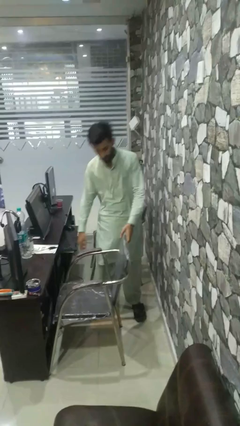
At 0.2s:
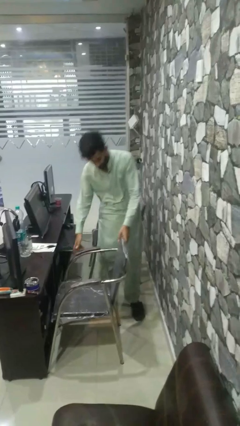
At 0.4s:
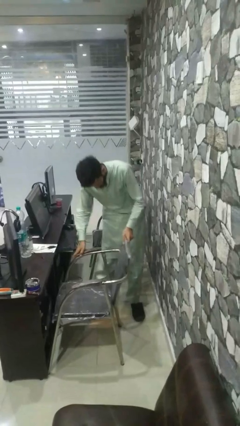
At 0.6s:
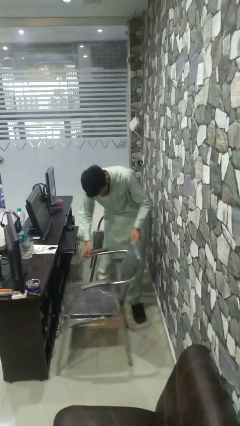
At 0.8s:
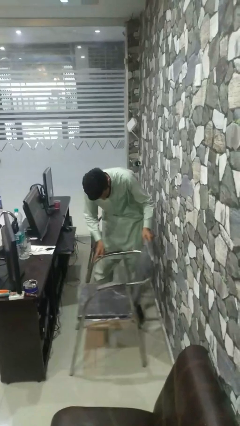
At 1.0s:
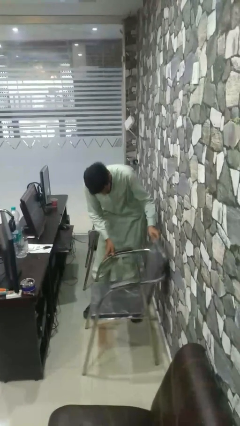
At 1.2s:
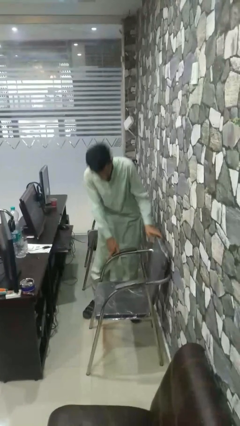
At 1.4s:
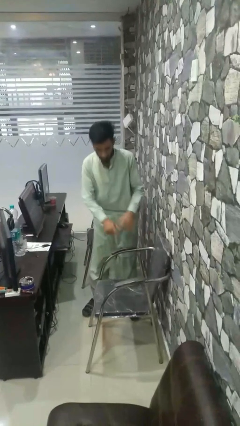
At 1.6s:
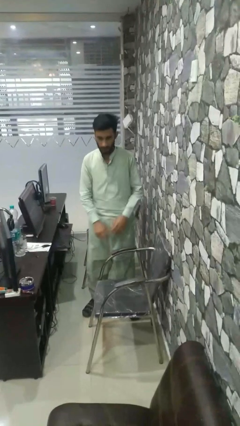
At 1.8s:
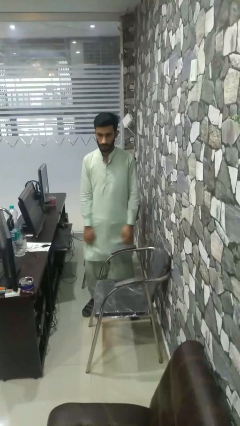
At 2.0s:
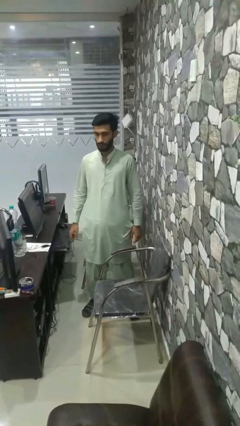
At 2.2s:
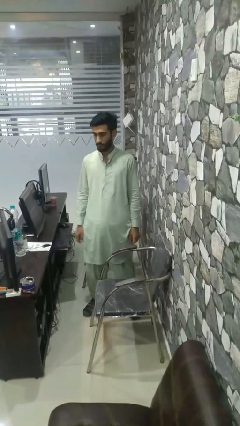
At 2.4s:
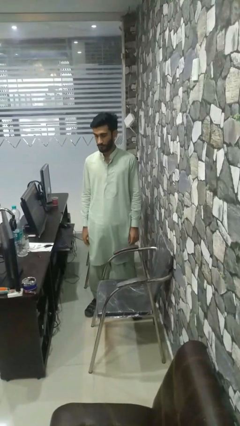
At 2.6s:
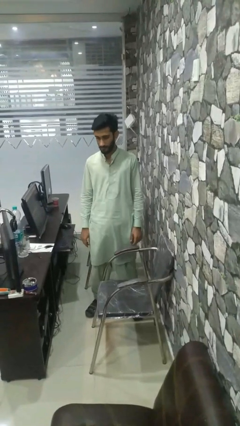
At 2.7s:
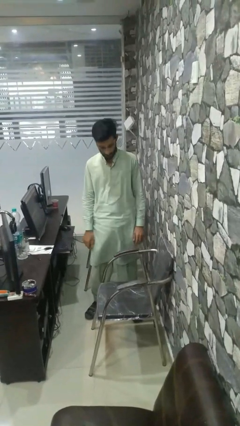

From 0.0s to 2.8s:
person pulls out chair

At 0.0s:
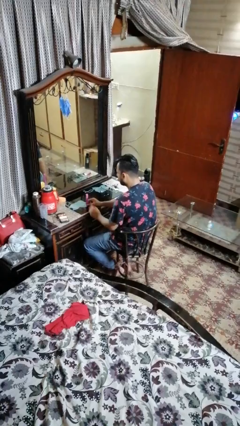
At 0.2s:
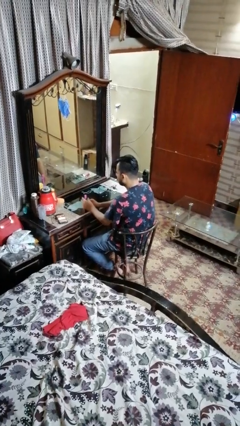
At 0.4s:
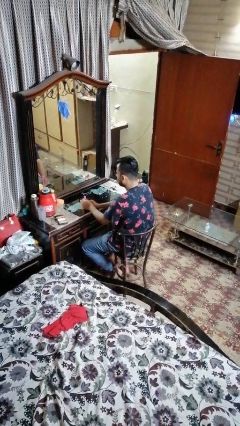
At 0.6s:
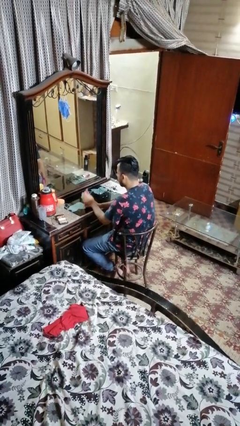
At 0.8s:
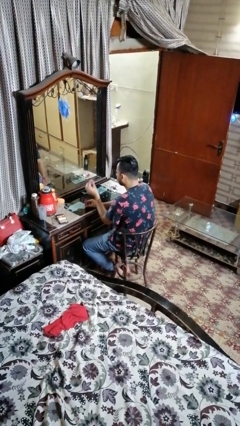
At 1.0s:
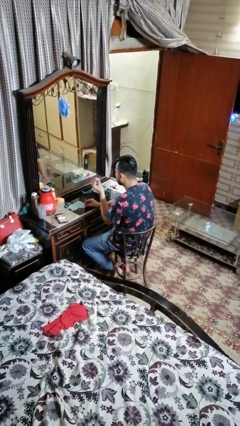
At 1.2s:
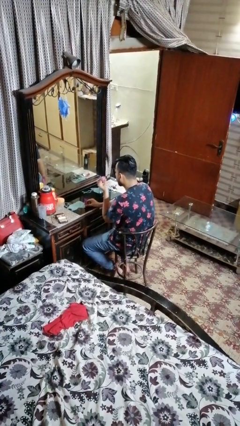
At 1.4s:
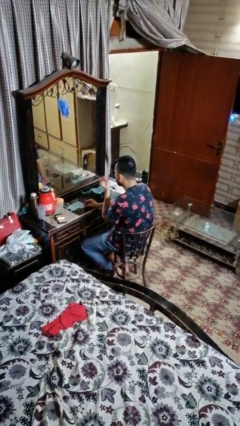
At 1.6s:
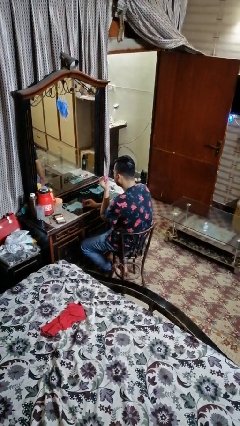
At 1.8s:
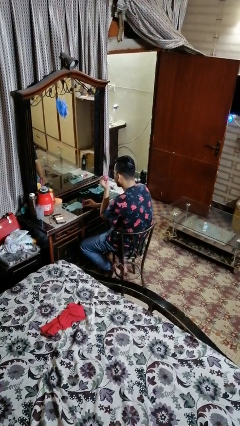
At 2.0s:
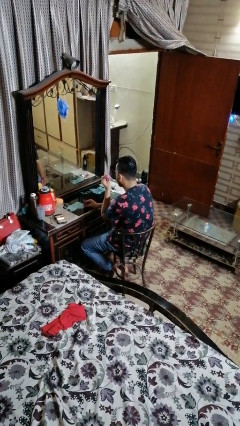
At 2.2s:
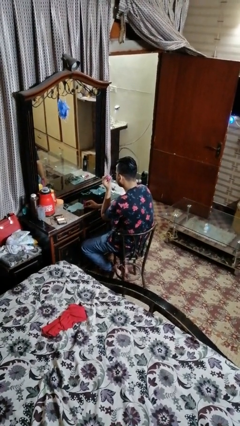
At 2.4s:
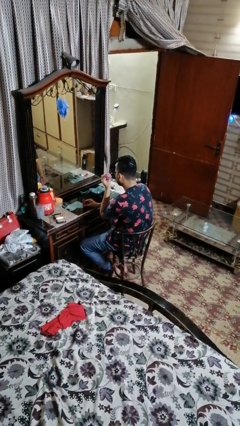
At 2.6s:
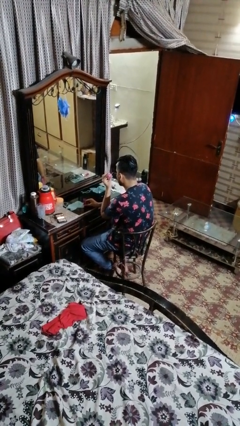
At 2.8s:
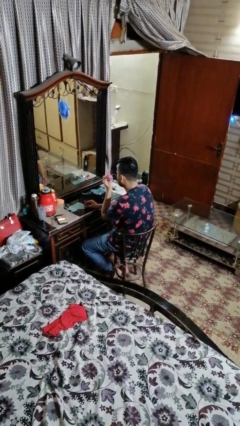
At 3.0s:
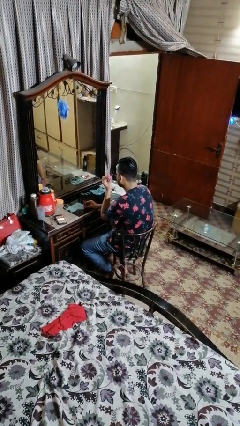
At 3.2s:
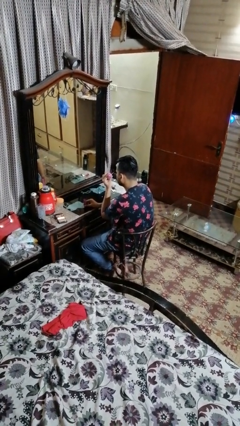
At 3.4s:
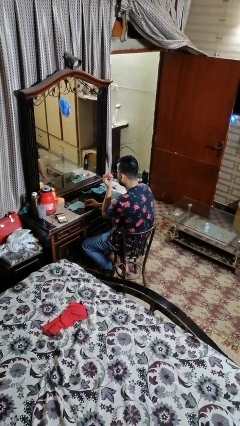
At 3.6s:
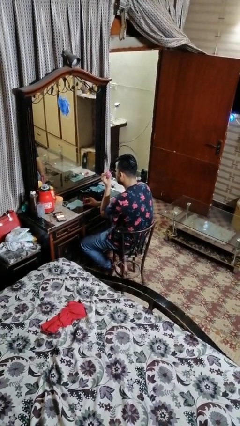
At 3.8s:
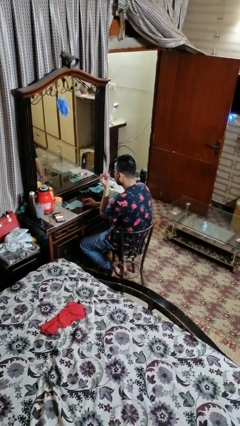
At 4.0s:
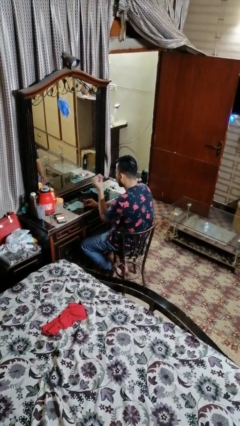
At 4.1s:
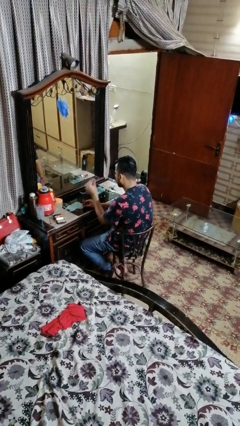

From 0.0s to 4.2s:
person applies eye makeup

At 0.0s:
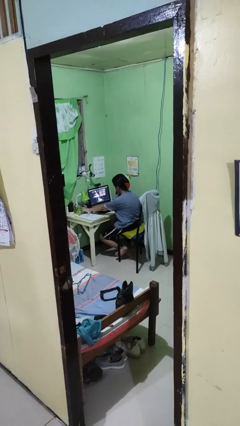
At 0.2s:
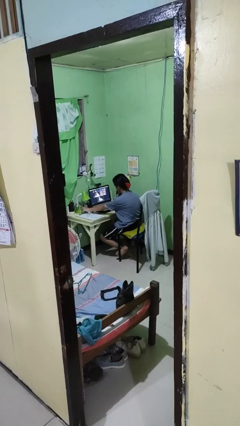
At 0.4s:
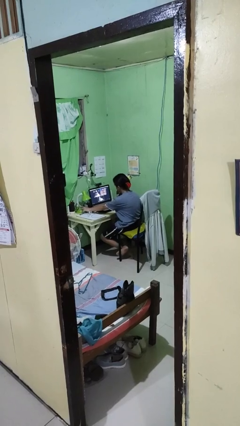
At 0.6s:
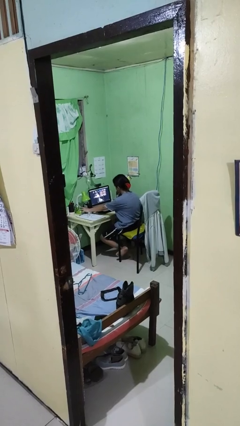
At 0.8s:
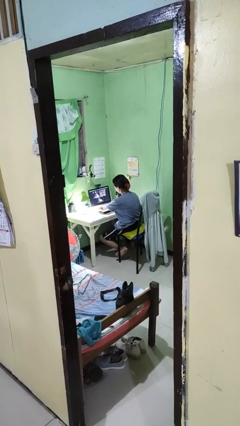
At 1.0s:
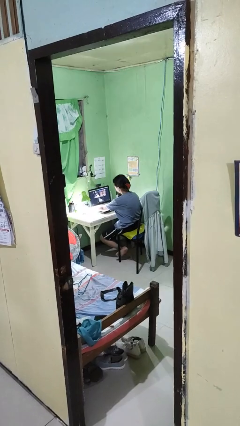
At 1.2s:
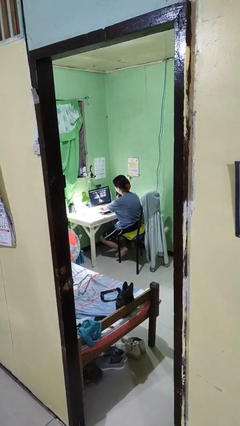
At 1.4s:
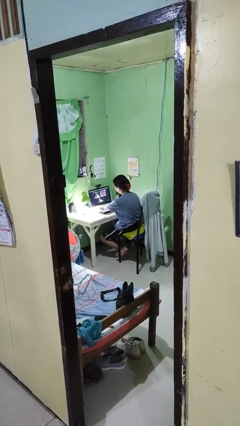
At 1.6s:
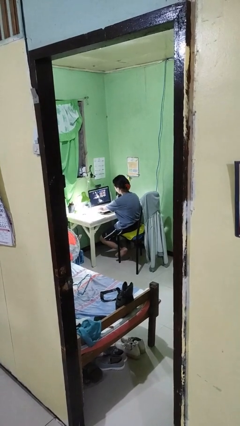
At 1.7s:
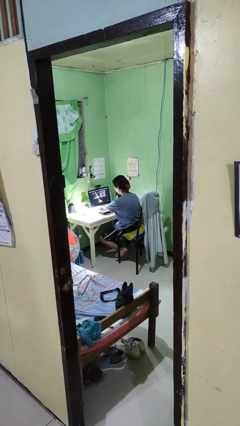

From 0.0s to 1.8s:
person turns on lamp

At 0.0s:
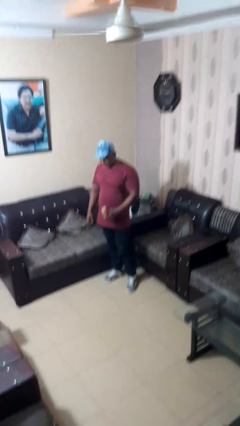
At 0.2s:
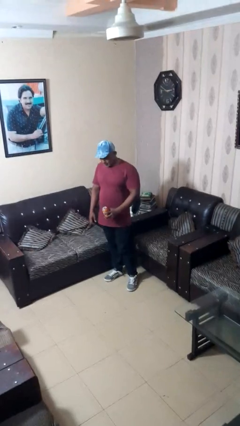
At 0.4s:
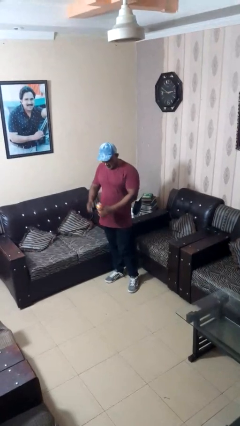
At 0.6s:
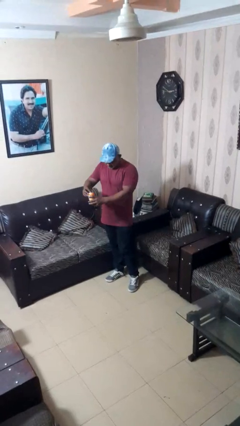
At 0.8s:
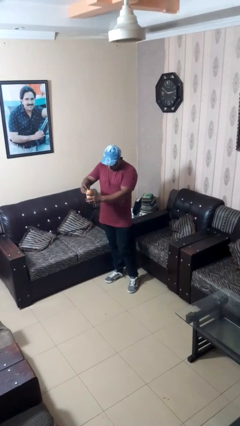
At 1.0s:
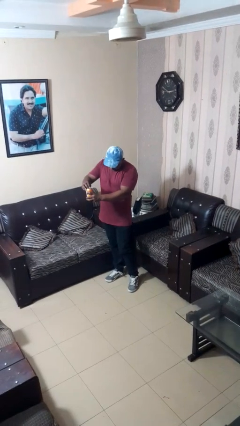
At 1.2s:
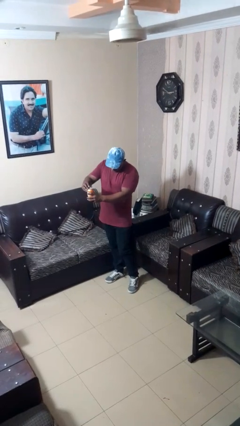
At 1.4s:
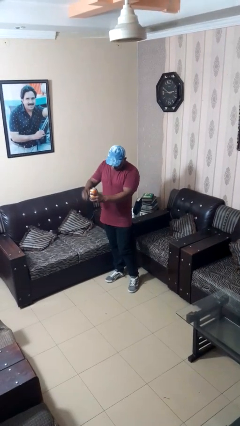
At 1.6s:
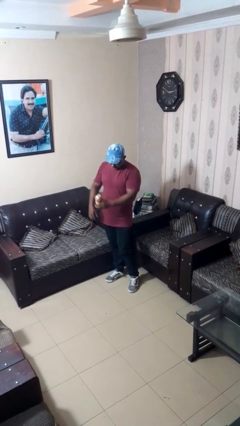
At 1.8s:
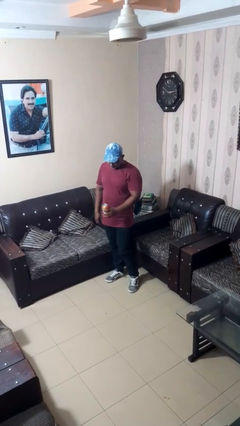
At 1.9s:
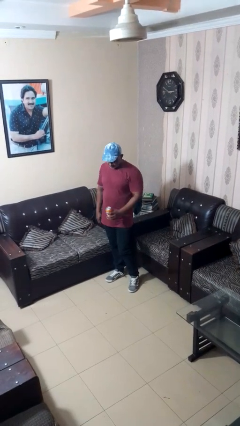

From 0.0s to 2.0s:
person opens beverage can

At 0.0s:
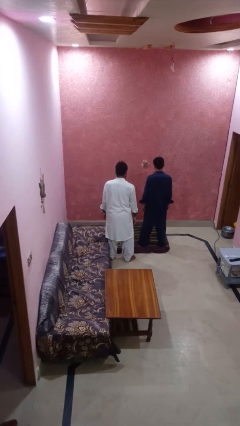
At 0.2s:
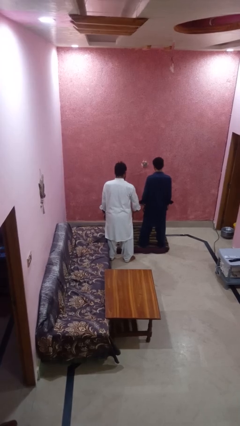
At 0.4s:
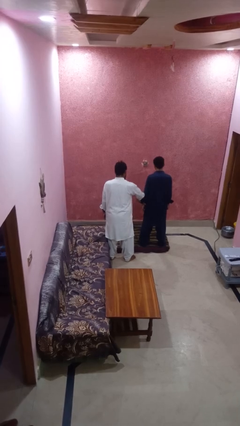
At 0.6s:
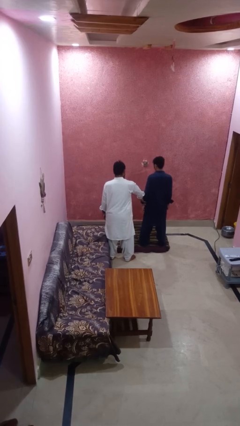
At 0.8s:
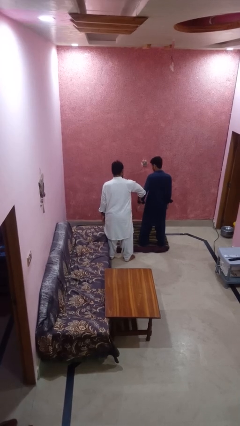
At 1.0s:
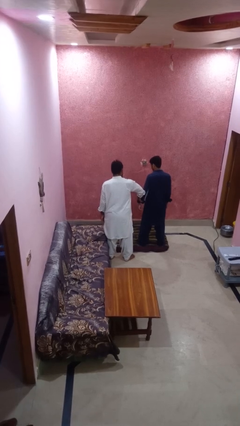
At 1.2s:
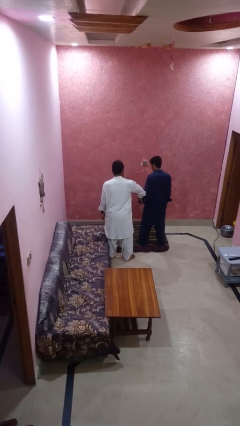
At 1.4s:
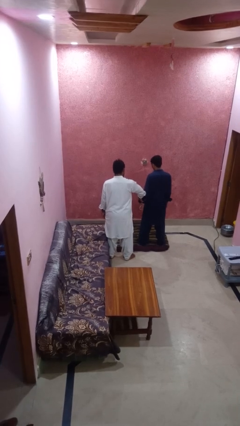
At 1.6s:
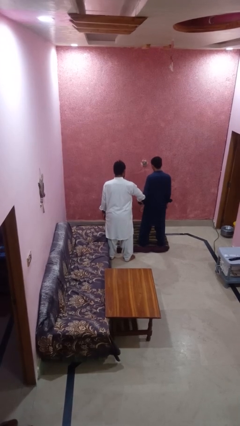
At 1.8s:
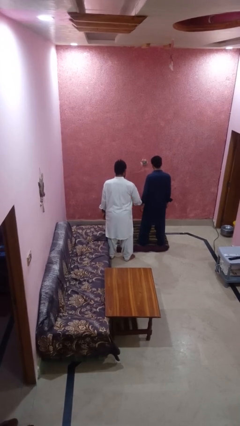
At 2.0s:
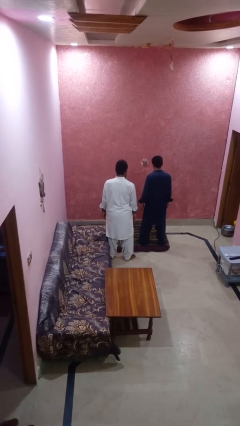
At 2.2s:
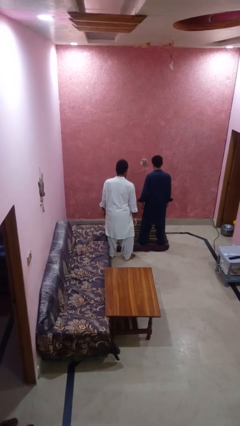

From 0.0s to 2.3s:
person grabs person by bicep

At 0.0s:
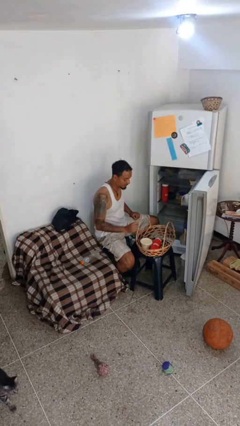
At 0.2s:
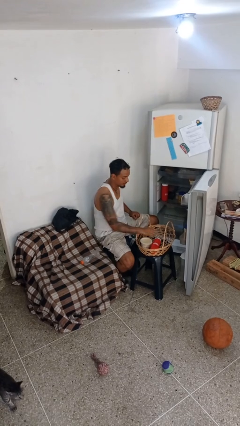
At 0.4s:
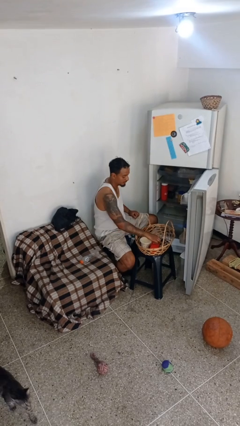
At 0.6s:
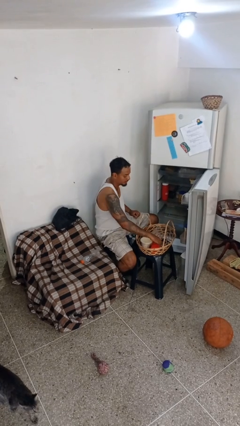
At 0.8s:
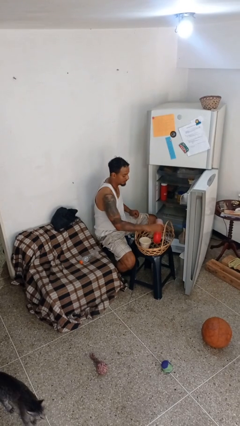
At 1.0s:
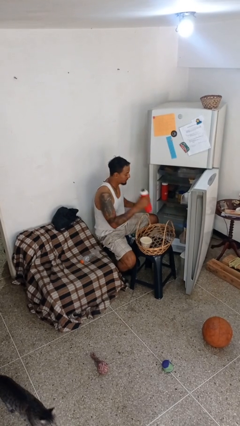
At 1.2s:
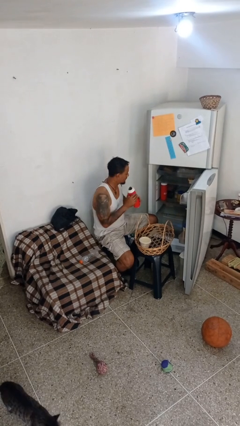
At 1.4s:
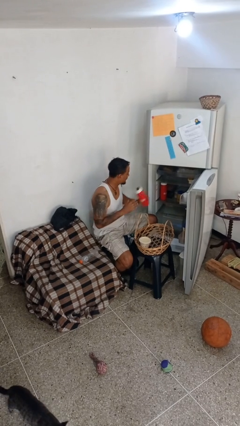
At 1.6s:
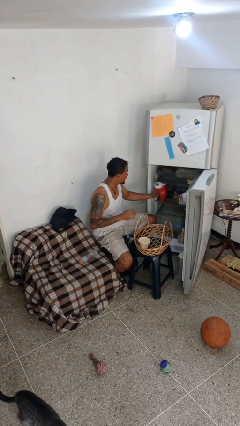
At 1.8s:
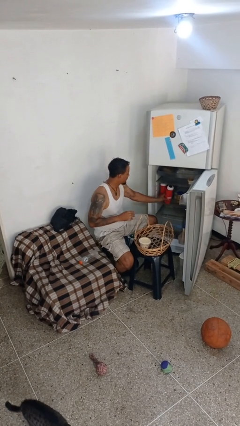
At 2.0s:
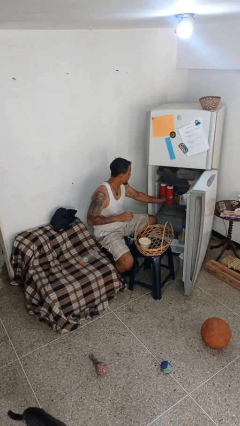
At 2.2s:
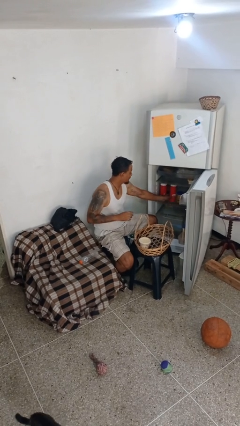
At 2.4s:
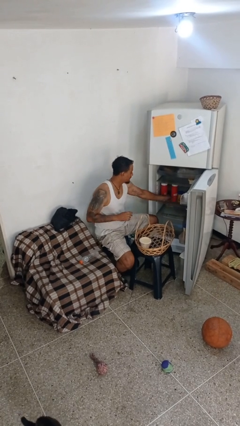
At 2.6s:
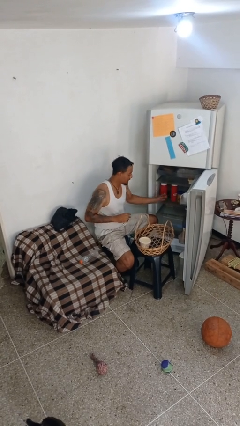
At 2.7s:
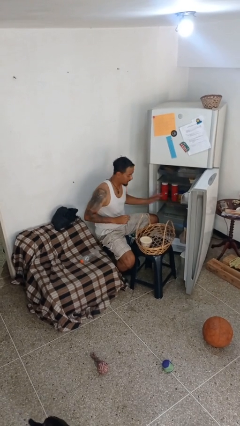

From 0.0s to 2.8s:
person loads groceries into refrigerator

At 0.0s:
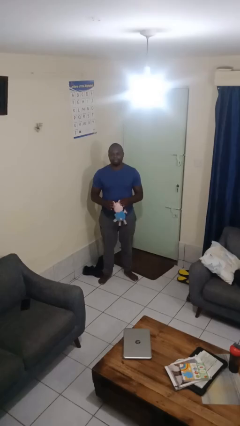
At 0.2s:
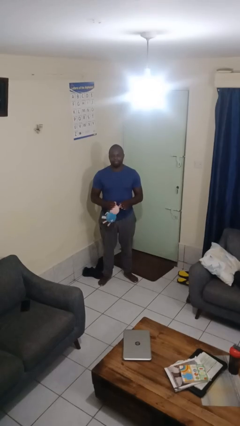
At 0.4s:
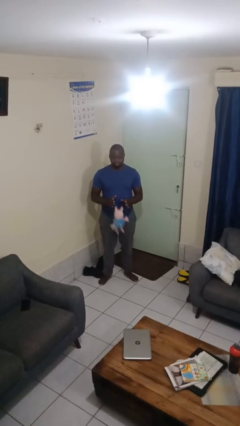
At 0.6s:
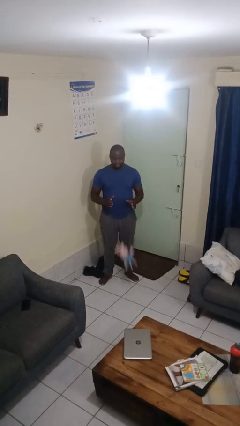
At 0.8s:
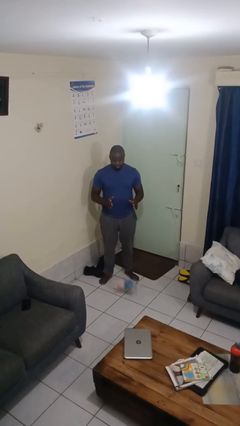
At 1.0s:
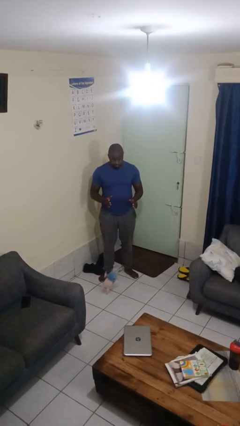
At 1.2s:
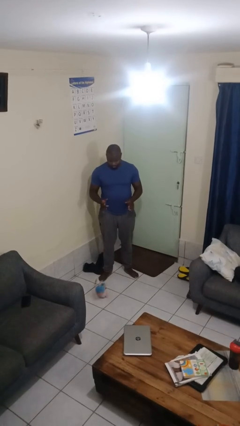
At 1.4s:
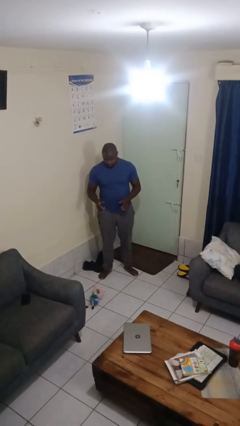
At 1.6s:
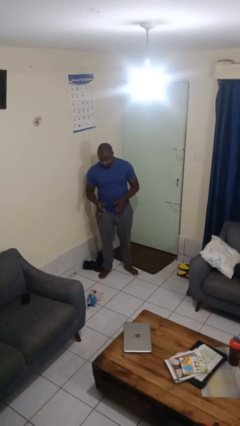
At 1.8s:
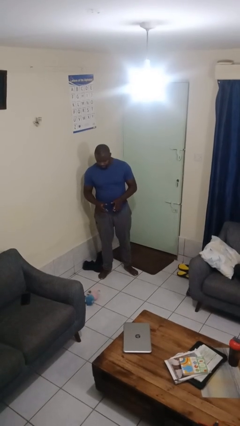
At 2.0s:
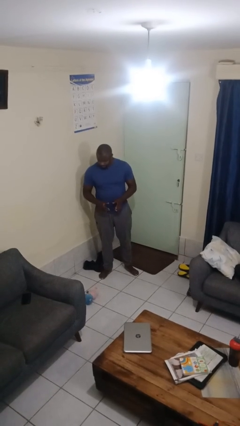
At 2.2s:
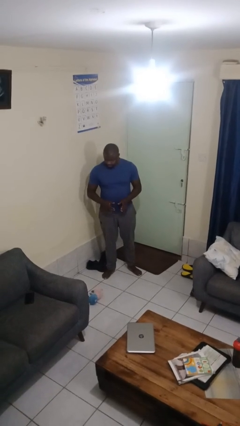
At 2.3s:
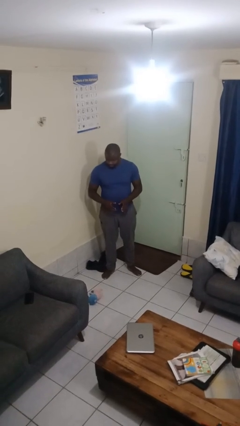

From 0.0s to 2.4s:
person drops object
